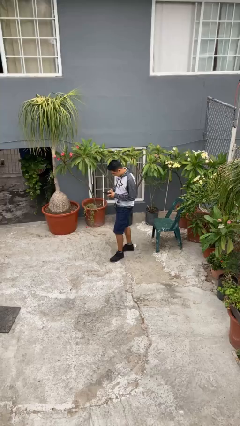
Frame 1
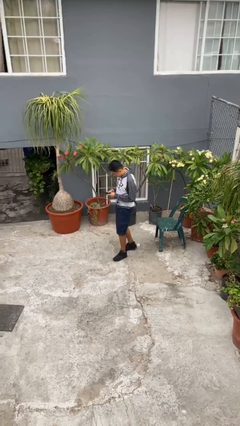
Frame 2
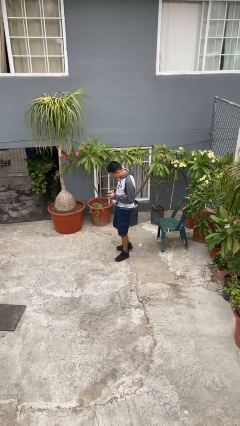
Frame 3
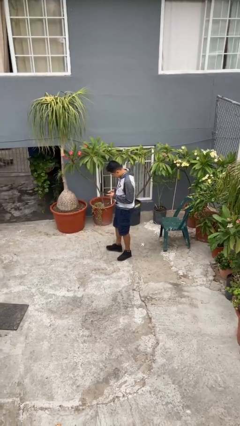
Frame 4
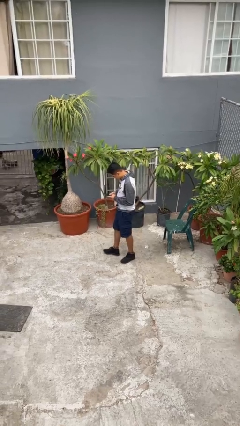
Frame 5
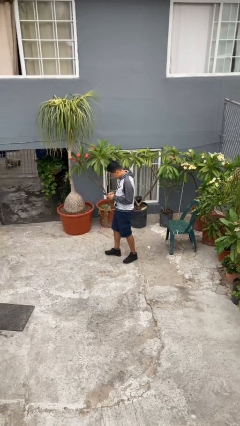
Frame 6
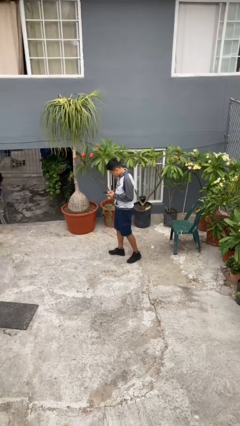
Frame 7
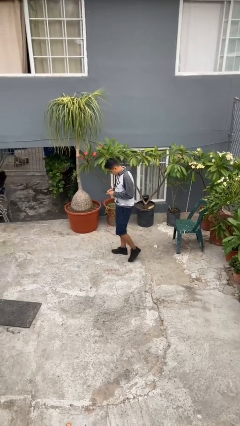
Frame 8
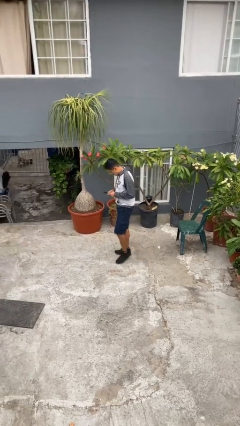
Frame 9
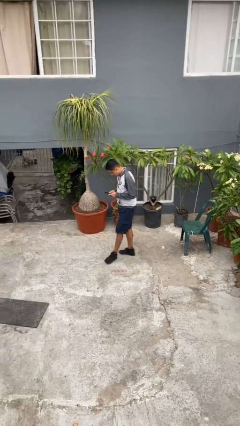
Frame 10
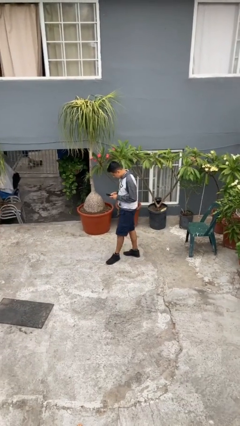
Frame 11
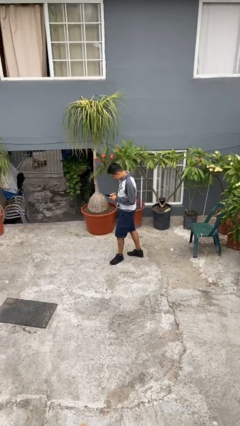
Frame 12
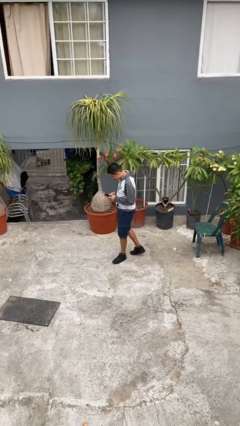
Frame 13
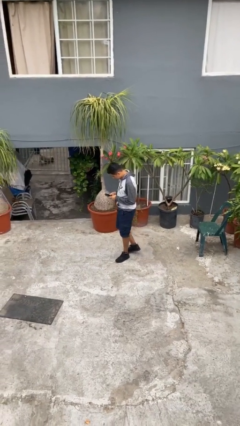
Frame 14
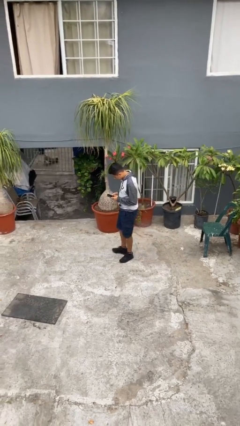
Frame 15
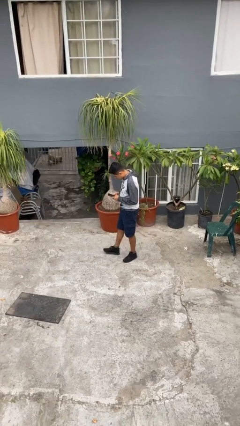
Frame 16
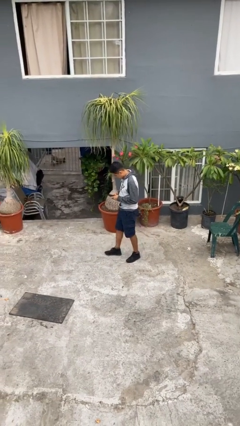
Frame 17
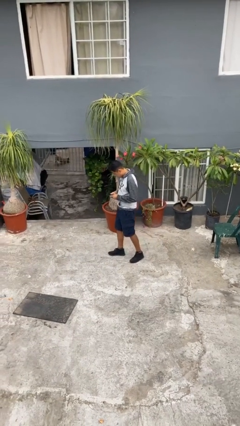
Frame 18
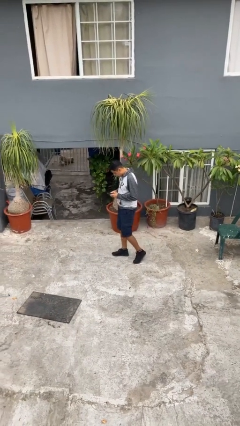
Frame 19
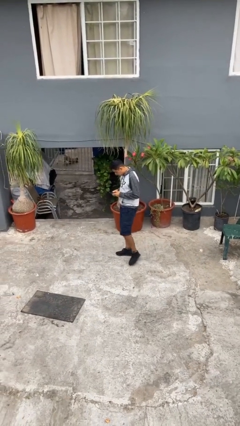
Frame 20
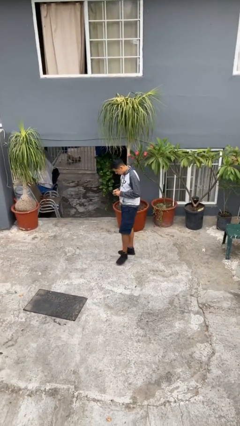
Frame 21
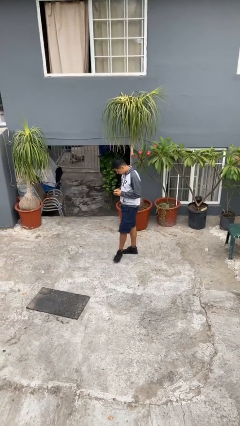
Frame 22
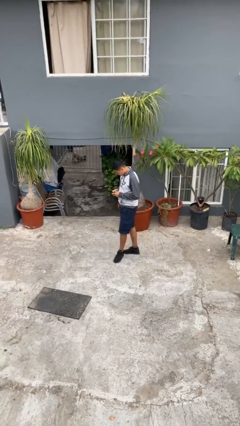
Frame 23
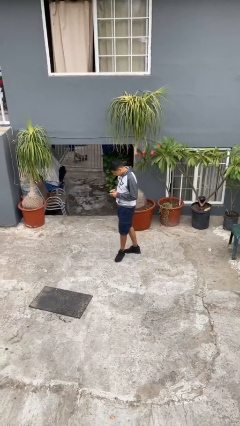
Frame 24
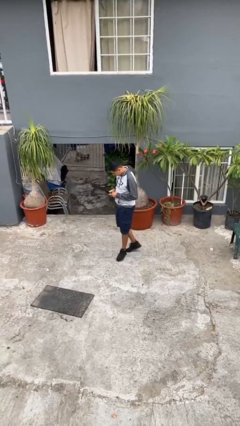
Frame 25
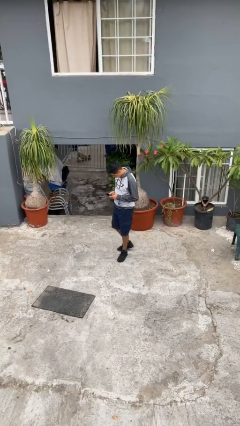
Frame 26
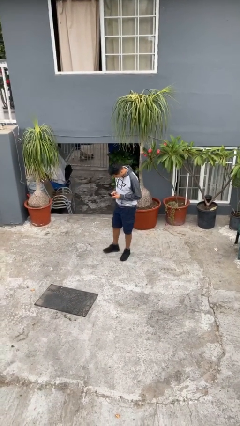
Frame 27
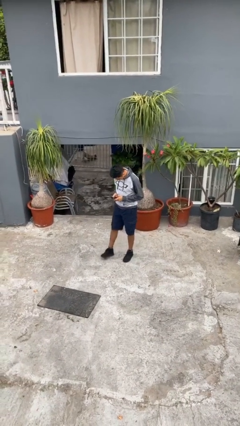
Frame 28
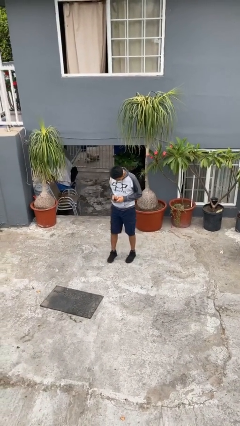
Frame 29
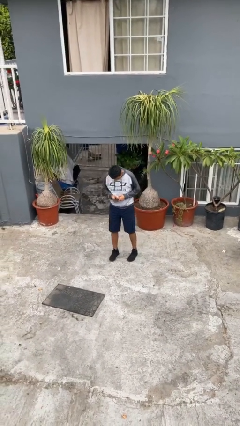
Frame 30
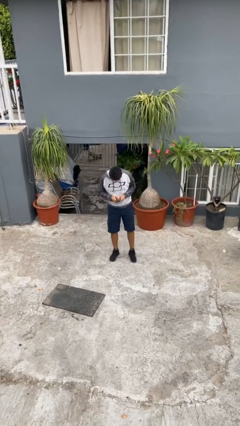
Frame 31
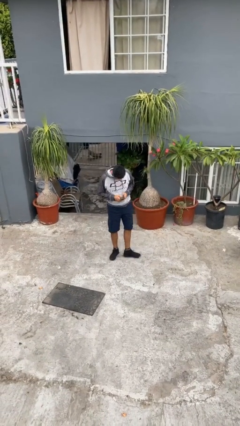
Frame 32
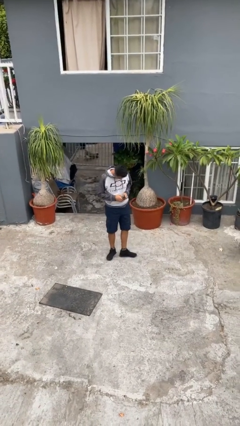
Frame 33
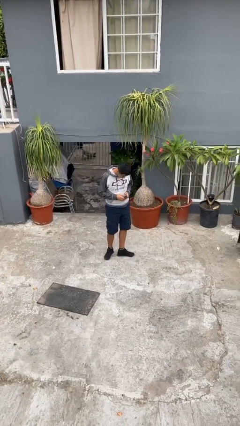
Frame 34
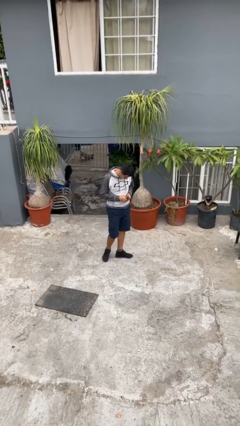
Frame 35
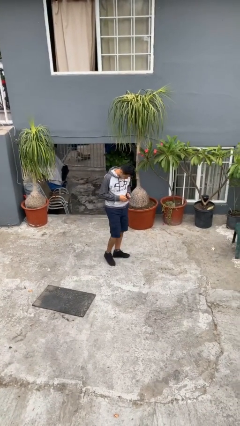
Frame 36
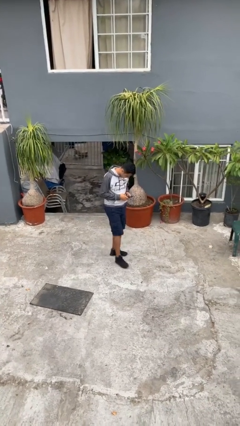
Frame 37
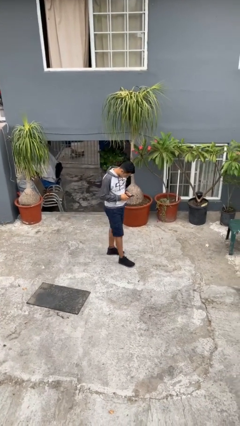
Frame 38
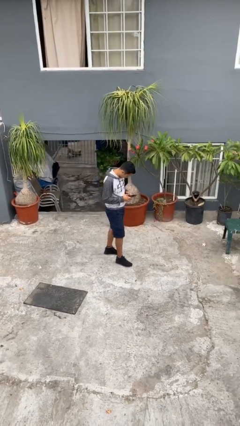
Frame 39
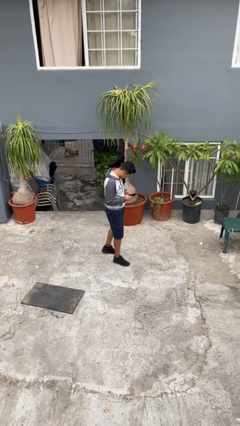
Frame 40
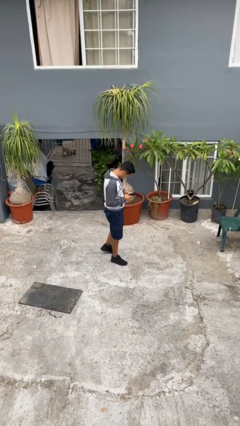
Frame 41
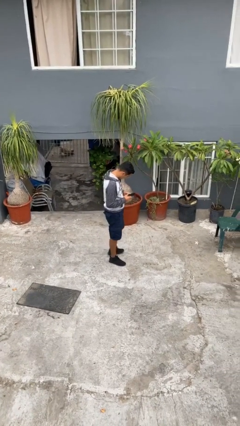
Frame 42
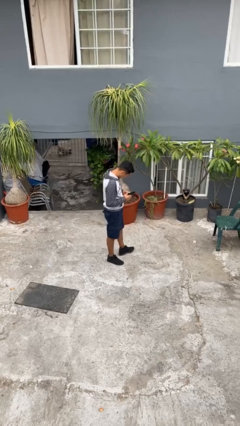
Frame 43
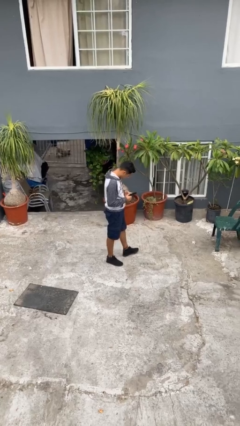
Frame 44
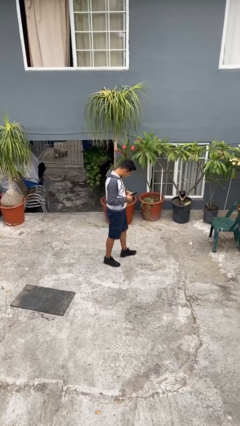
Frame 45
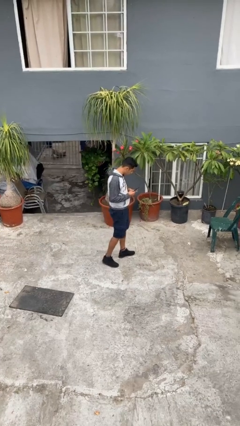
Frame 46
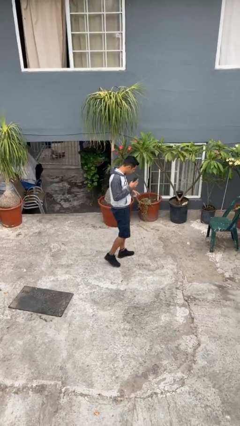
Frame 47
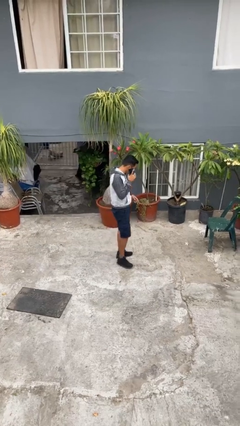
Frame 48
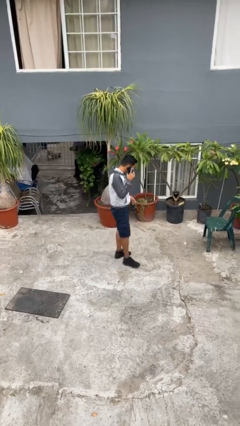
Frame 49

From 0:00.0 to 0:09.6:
person texts on phone

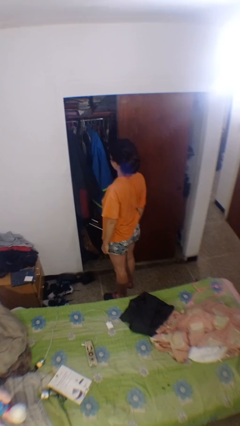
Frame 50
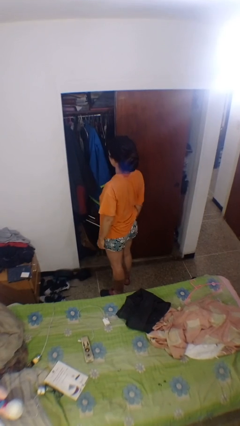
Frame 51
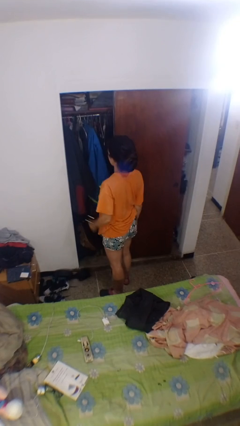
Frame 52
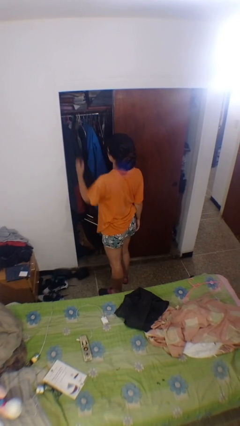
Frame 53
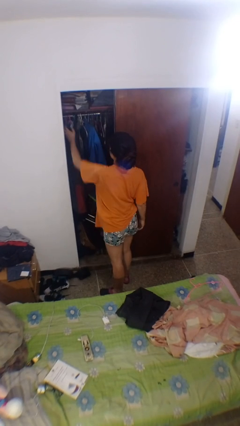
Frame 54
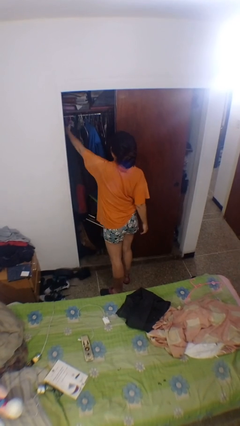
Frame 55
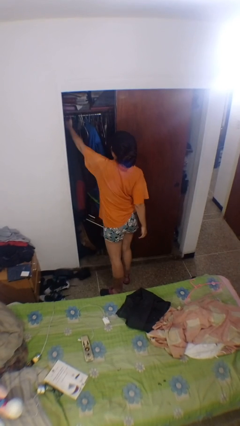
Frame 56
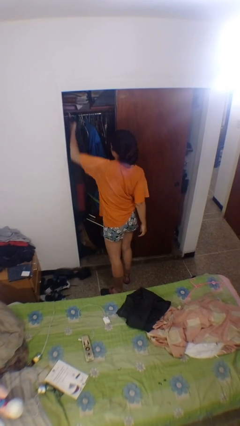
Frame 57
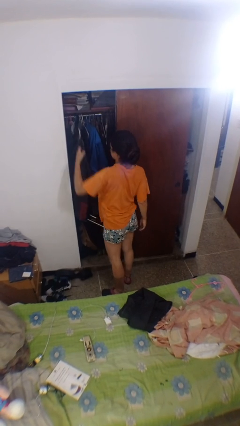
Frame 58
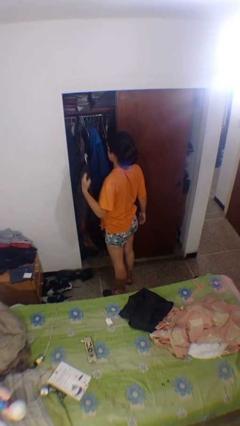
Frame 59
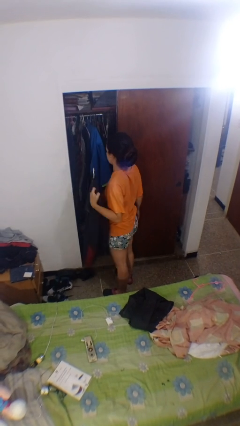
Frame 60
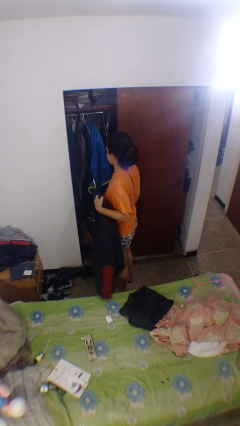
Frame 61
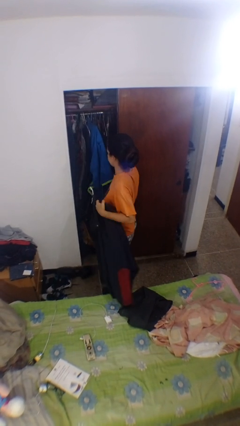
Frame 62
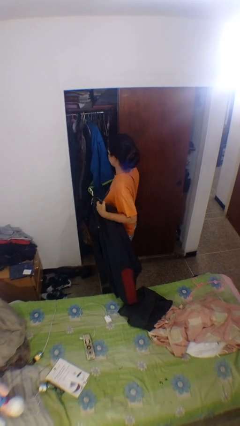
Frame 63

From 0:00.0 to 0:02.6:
person takes clothes from closet

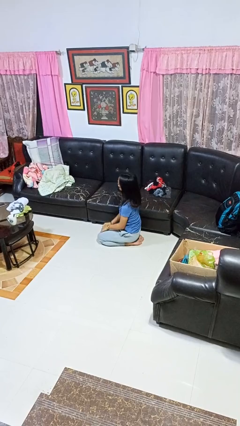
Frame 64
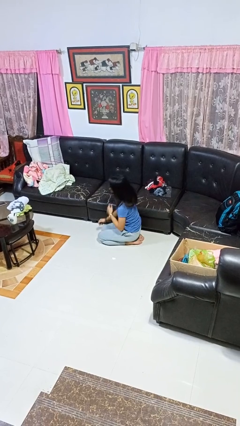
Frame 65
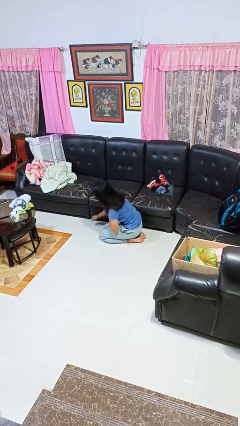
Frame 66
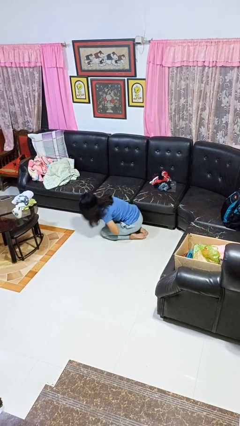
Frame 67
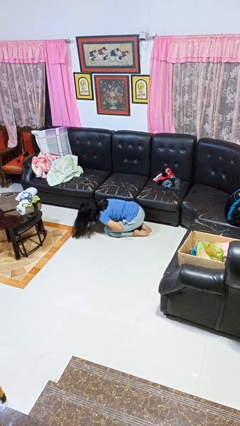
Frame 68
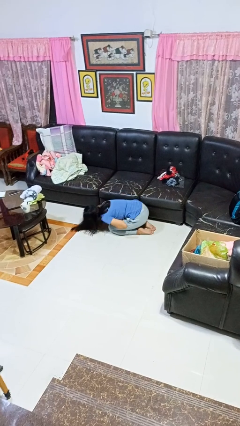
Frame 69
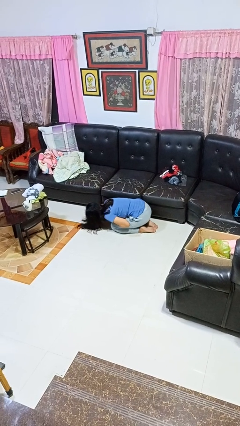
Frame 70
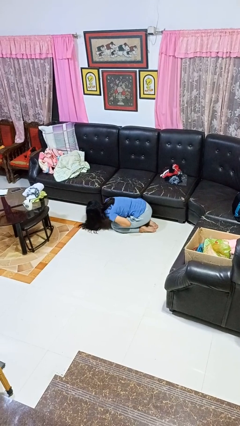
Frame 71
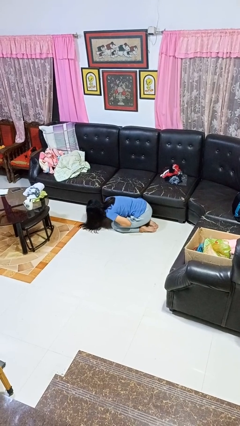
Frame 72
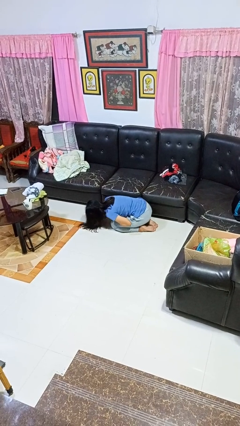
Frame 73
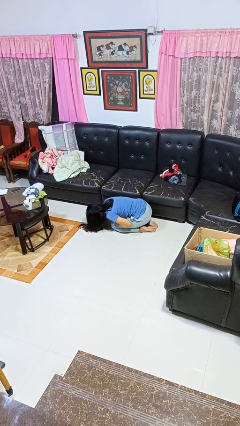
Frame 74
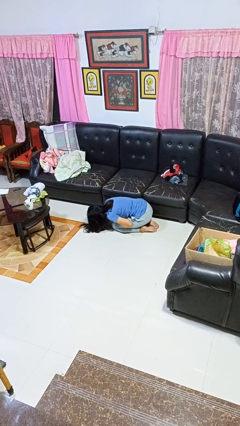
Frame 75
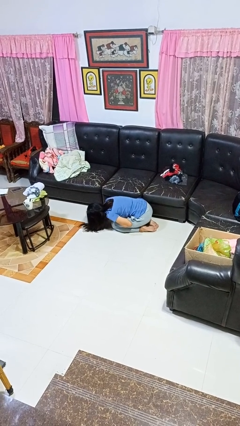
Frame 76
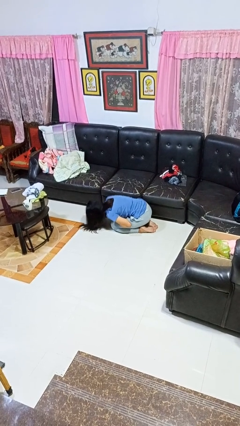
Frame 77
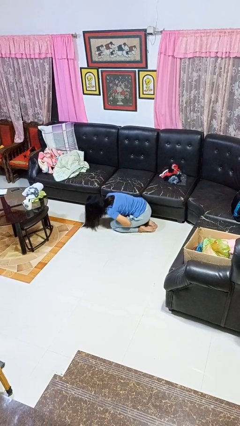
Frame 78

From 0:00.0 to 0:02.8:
person searches under couch

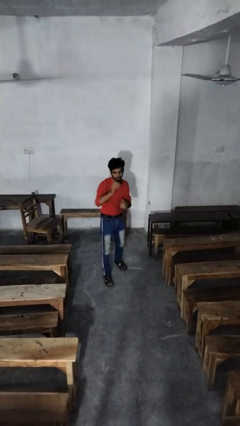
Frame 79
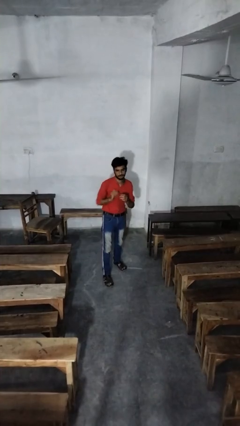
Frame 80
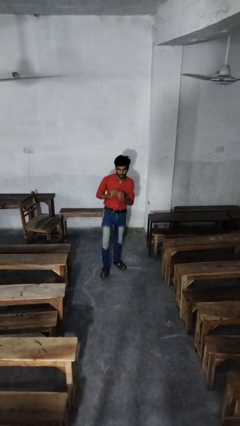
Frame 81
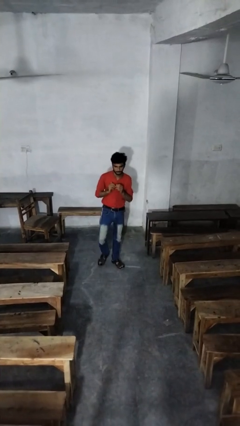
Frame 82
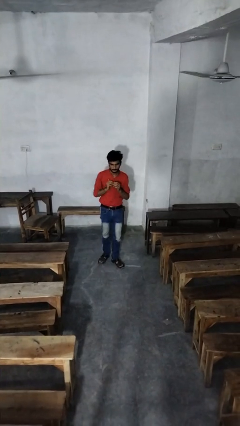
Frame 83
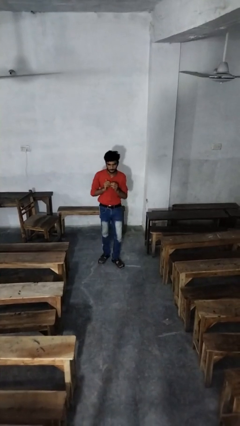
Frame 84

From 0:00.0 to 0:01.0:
person karate chop

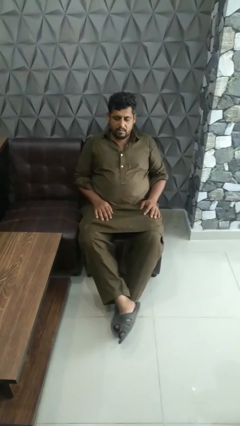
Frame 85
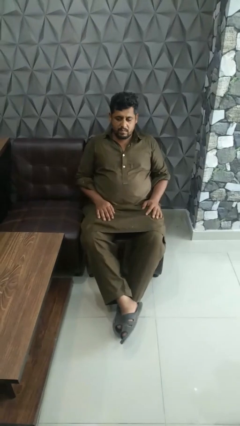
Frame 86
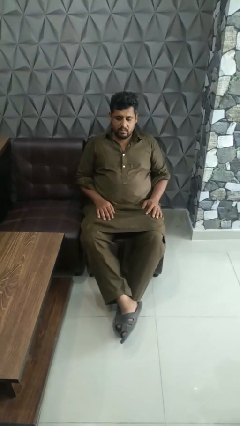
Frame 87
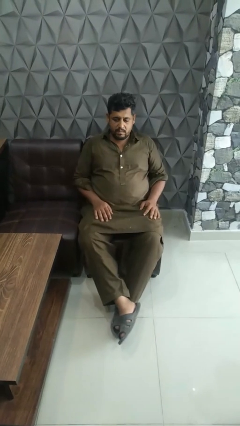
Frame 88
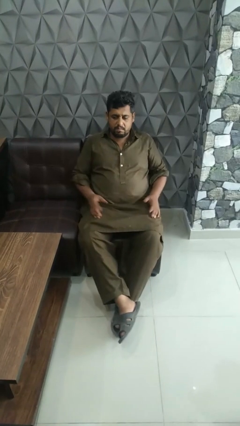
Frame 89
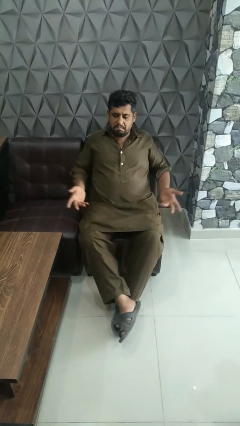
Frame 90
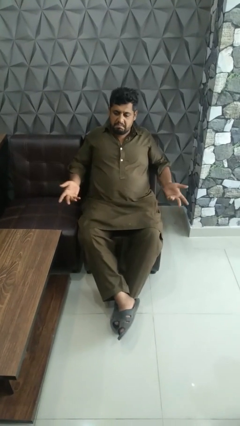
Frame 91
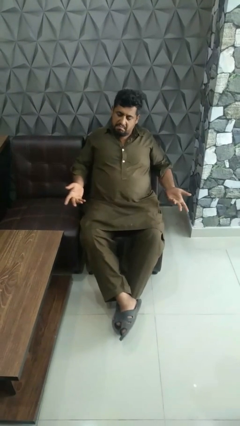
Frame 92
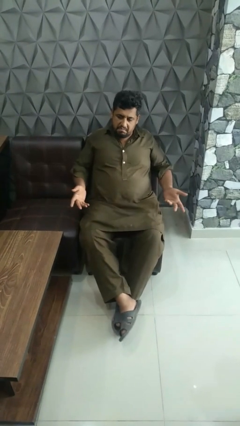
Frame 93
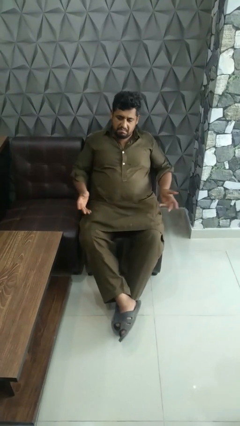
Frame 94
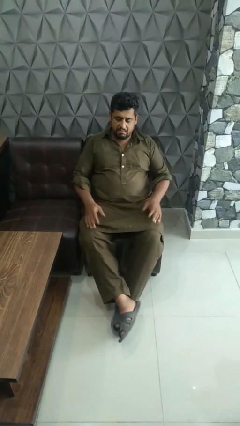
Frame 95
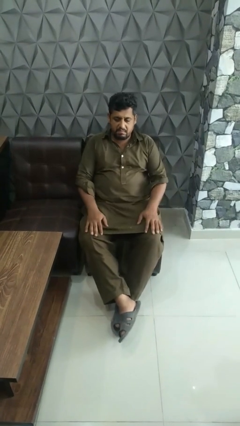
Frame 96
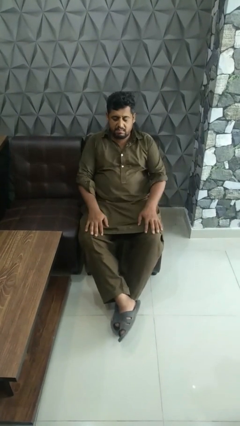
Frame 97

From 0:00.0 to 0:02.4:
person shrugs
